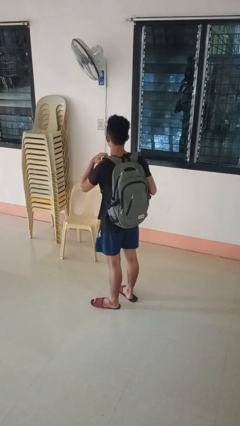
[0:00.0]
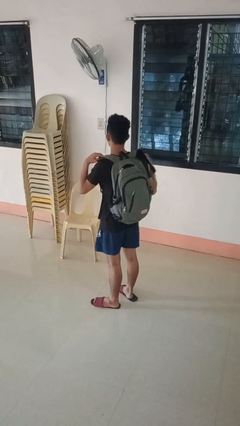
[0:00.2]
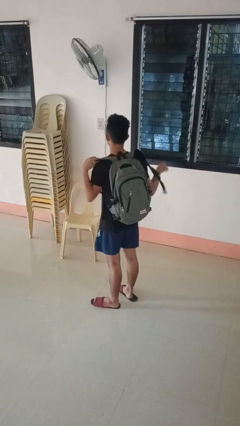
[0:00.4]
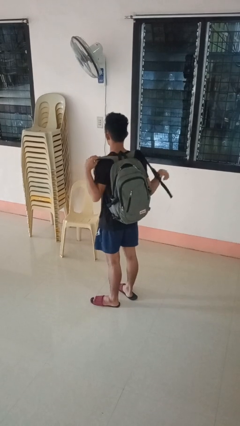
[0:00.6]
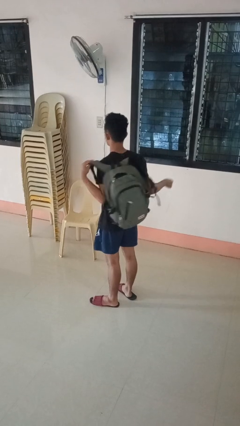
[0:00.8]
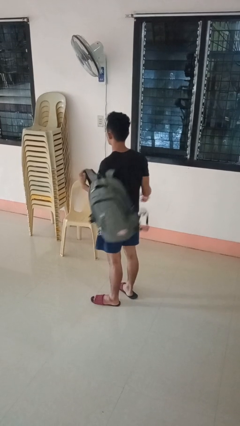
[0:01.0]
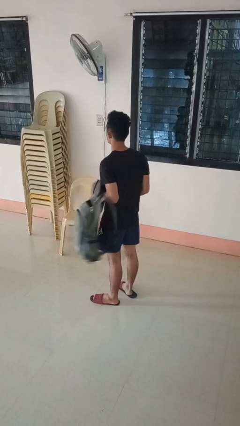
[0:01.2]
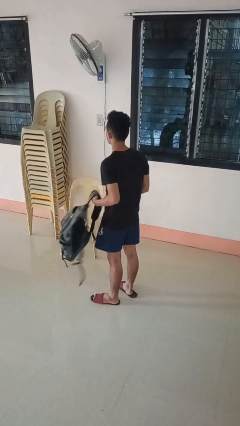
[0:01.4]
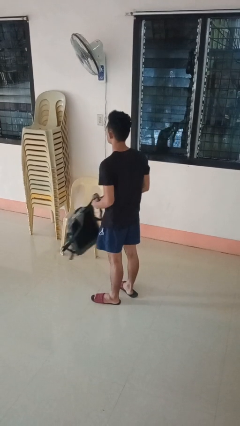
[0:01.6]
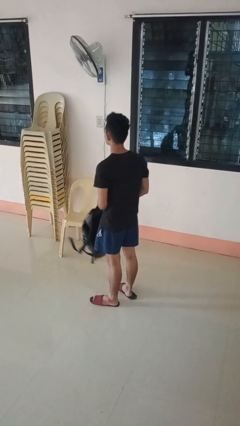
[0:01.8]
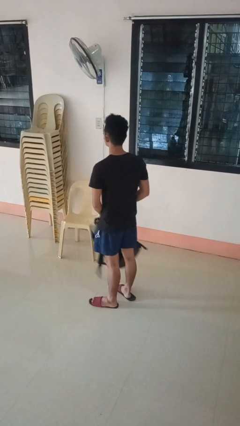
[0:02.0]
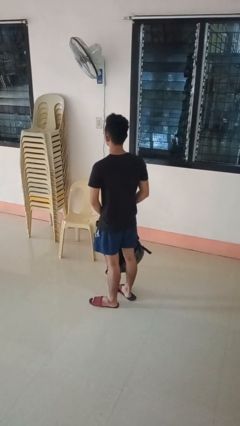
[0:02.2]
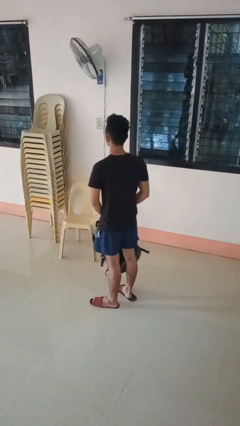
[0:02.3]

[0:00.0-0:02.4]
person takes off backpack

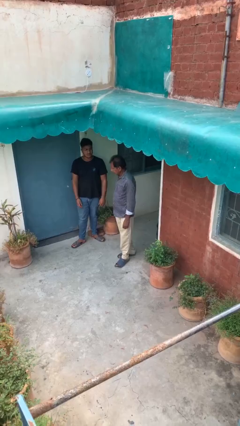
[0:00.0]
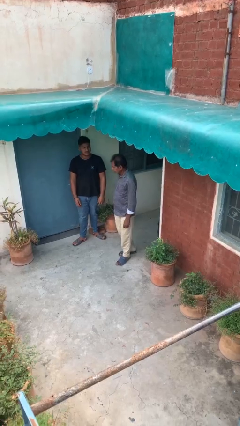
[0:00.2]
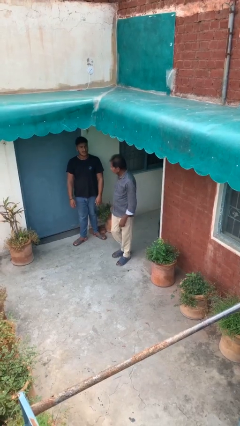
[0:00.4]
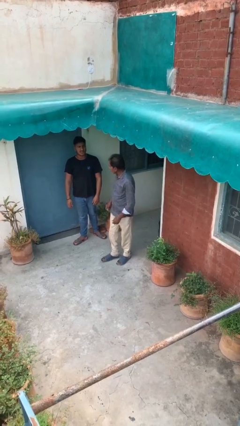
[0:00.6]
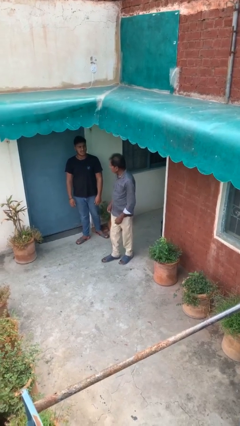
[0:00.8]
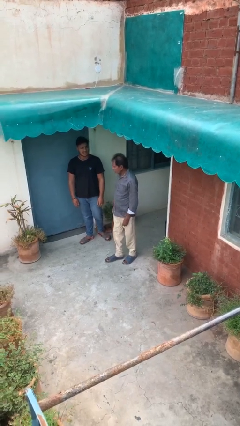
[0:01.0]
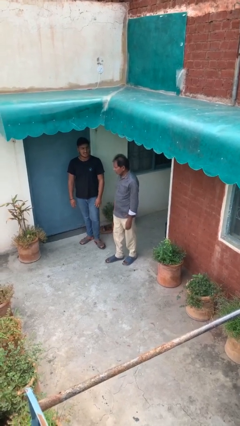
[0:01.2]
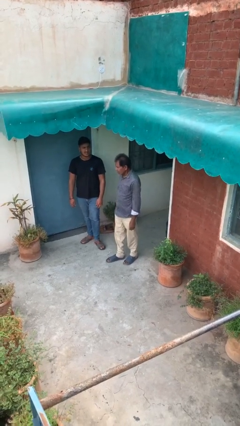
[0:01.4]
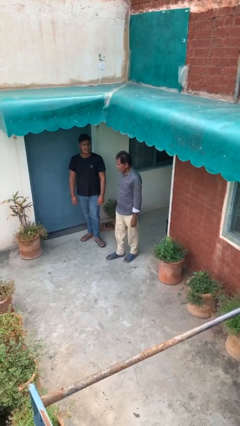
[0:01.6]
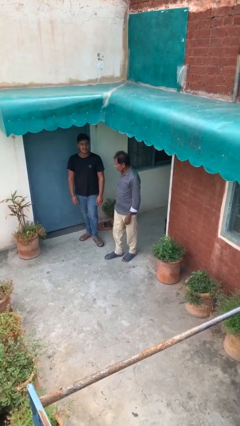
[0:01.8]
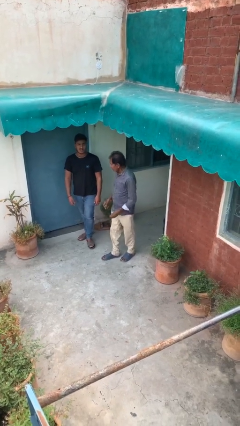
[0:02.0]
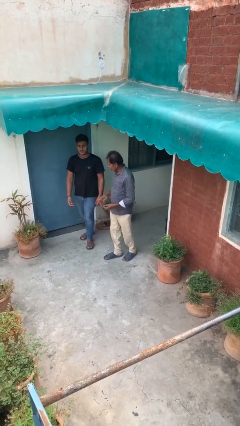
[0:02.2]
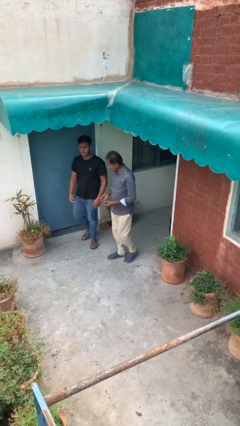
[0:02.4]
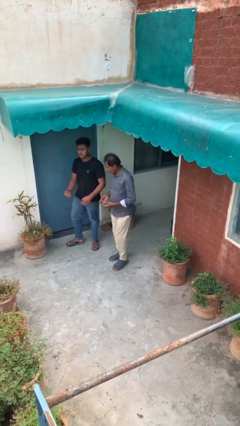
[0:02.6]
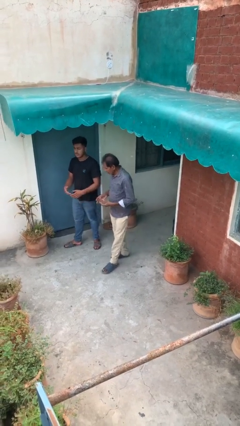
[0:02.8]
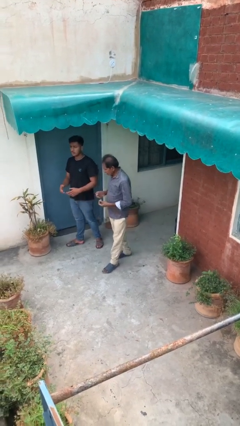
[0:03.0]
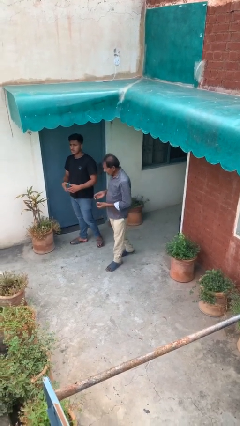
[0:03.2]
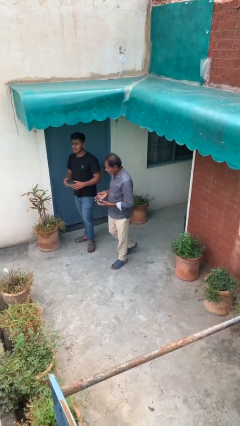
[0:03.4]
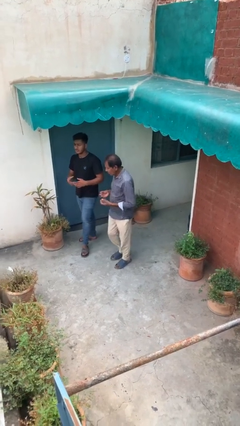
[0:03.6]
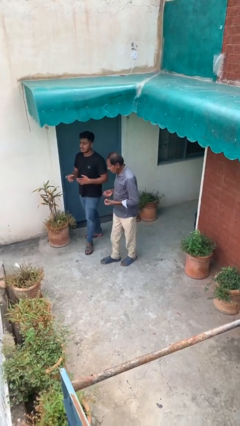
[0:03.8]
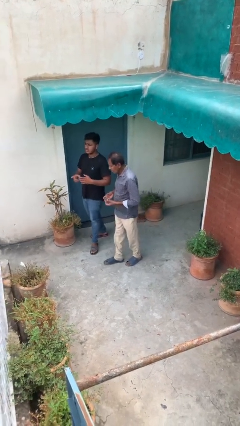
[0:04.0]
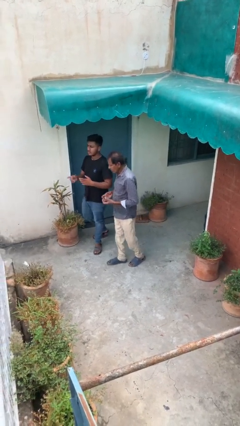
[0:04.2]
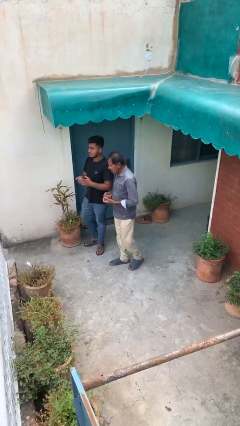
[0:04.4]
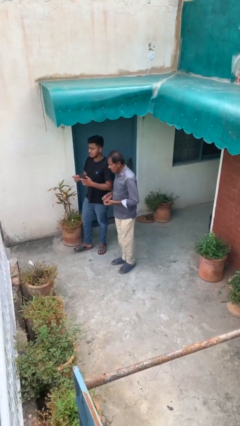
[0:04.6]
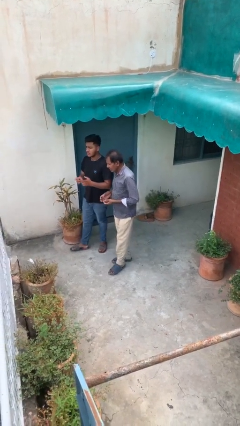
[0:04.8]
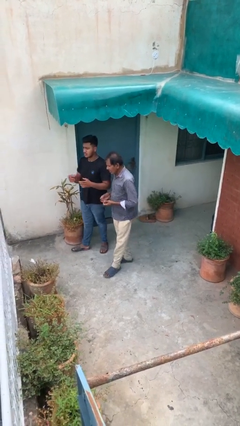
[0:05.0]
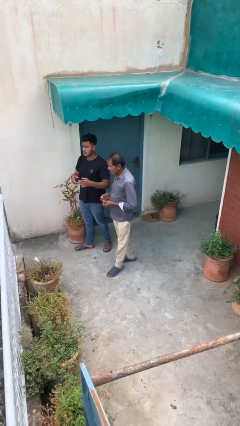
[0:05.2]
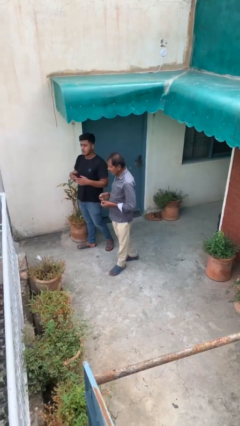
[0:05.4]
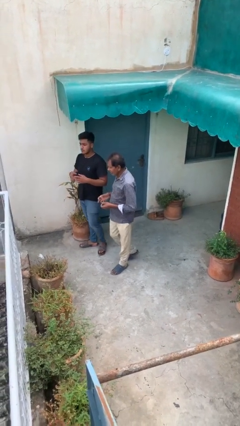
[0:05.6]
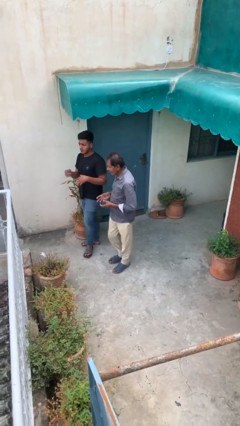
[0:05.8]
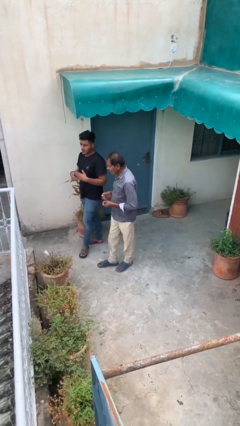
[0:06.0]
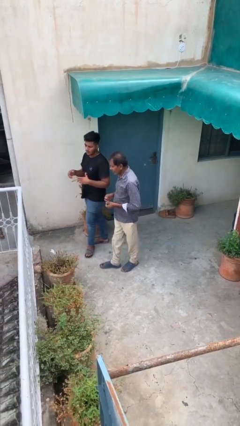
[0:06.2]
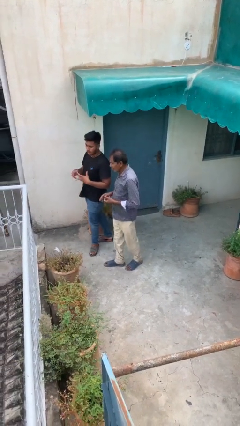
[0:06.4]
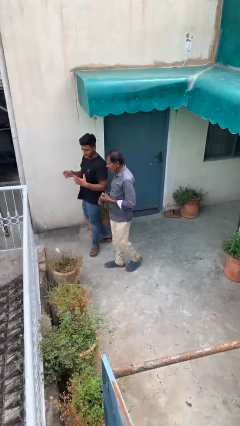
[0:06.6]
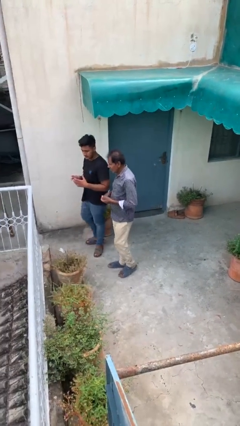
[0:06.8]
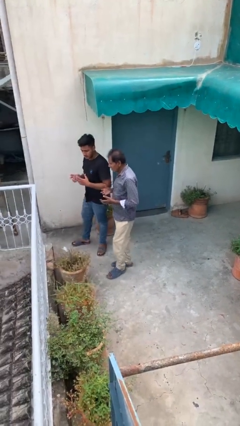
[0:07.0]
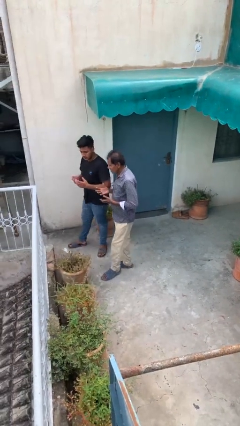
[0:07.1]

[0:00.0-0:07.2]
person talks to person

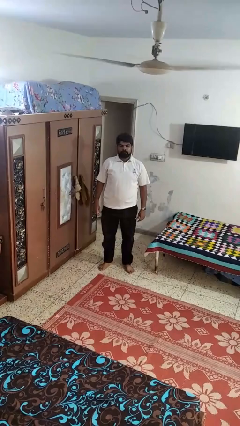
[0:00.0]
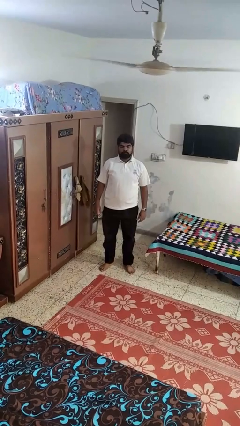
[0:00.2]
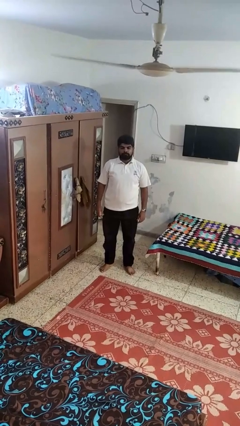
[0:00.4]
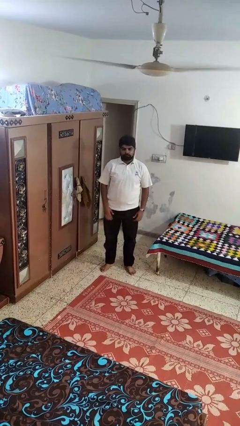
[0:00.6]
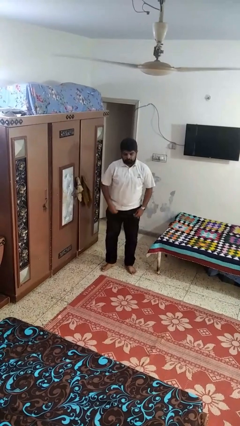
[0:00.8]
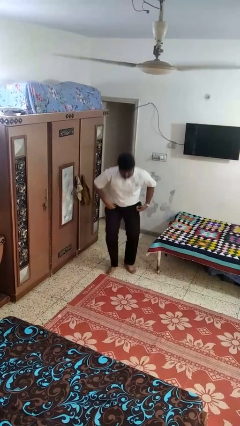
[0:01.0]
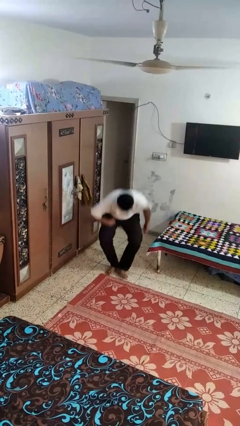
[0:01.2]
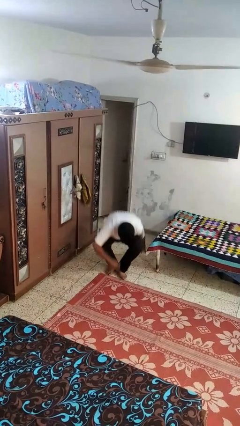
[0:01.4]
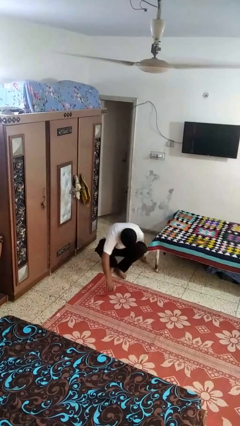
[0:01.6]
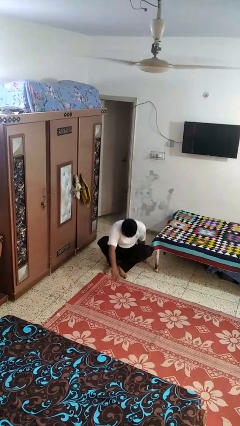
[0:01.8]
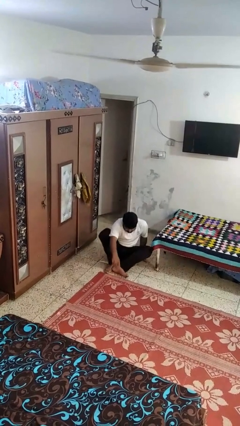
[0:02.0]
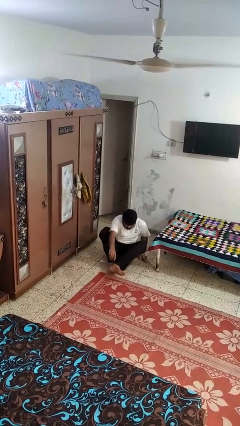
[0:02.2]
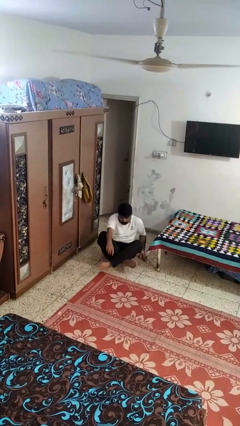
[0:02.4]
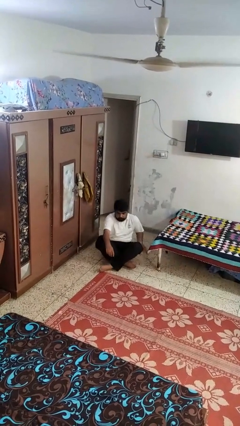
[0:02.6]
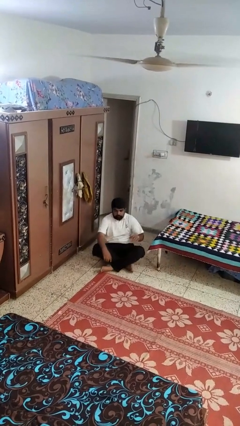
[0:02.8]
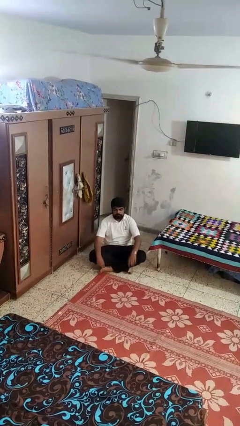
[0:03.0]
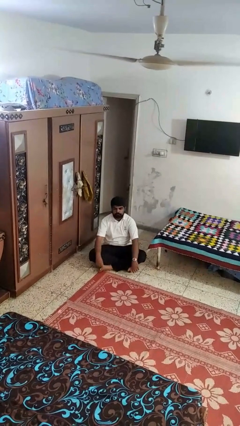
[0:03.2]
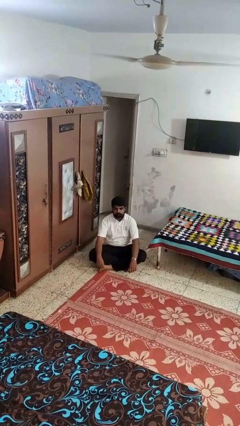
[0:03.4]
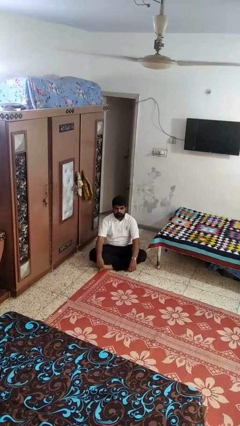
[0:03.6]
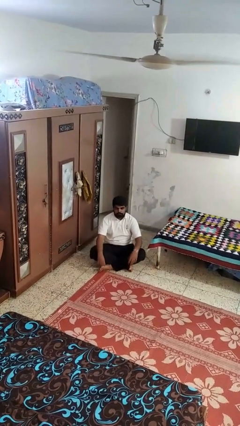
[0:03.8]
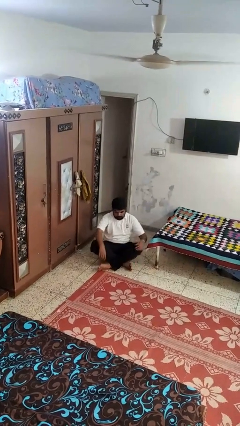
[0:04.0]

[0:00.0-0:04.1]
person sits crisscross

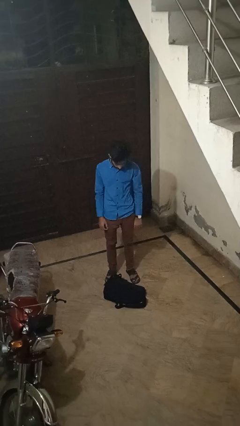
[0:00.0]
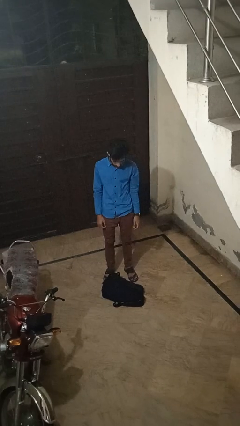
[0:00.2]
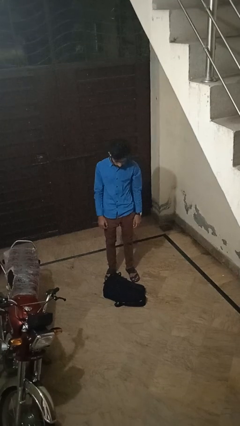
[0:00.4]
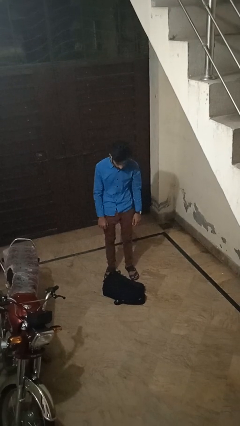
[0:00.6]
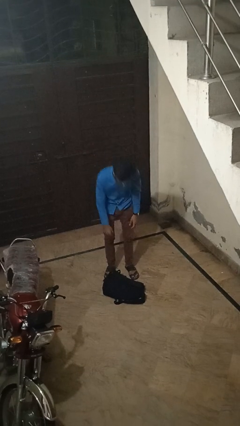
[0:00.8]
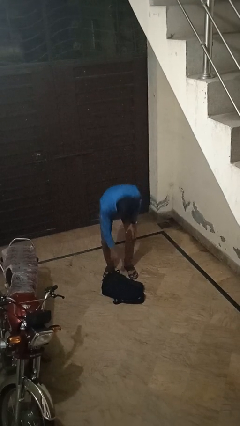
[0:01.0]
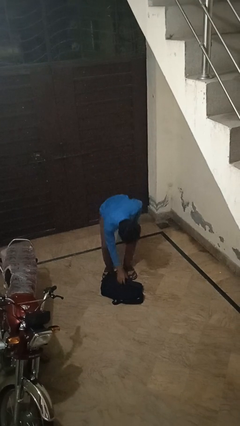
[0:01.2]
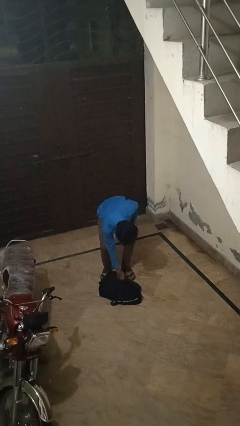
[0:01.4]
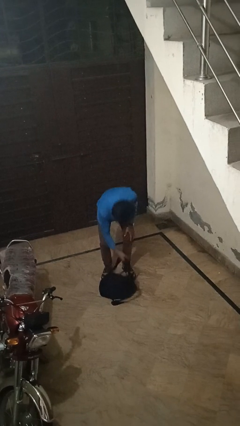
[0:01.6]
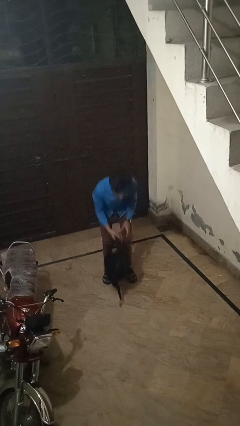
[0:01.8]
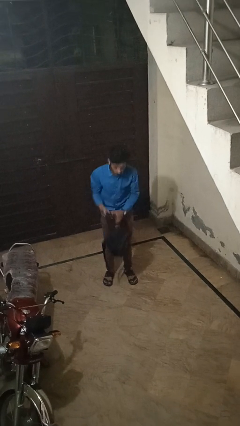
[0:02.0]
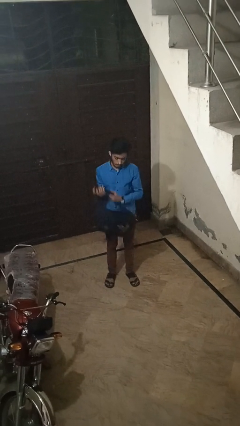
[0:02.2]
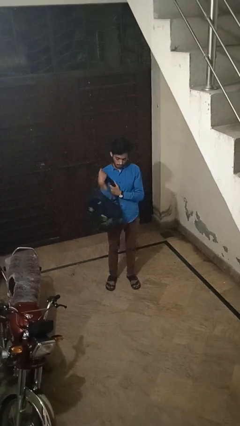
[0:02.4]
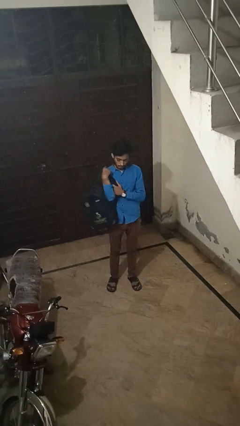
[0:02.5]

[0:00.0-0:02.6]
person picks up object from floor

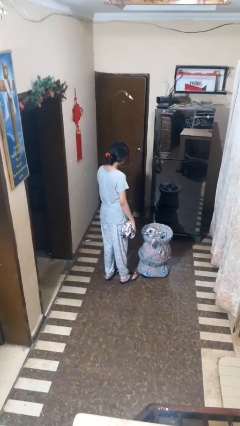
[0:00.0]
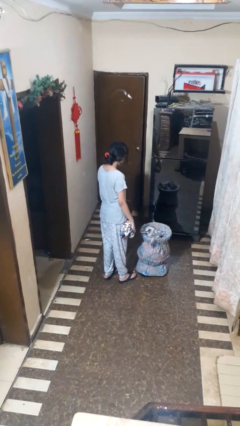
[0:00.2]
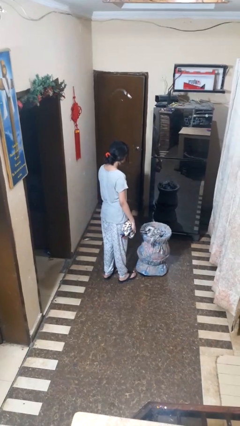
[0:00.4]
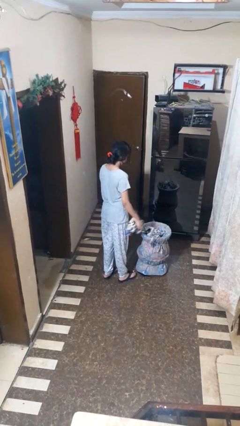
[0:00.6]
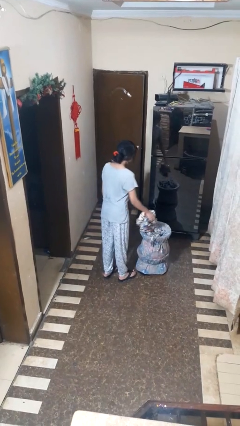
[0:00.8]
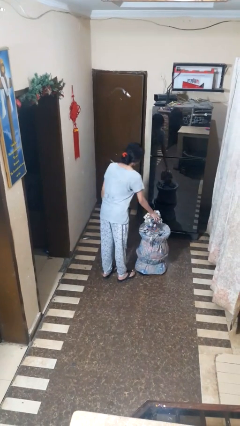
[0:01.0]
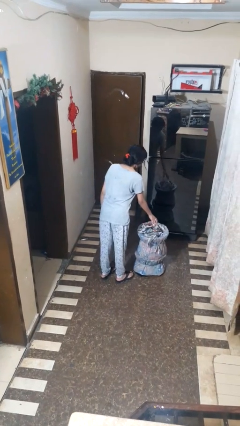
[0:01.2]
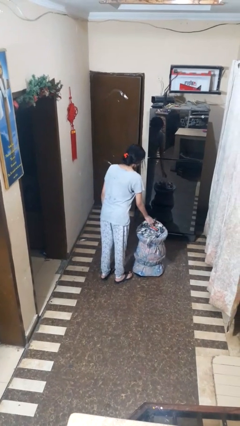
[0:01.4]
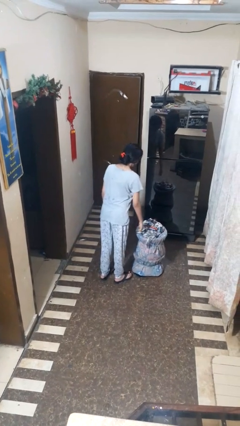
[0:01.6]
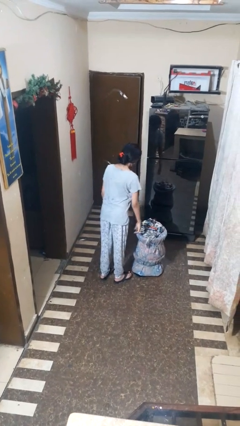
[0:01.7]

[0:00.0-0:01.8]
person puts object into basket
